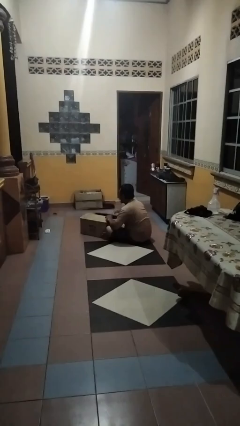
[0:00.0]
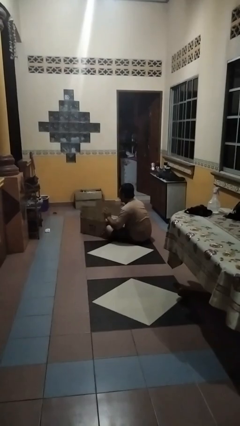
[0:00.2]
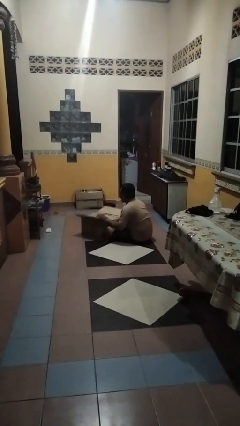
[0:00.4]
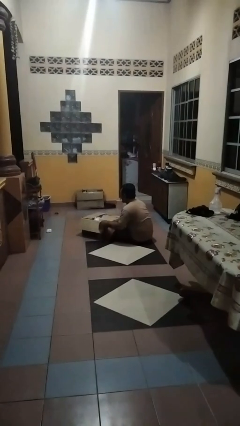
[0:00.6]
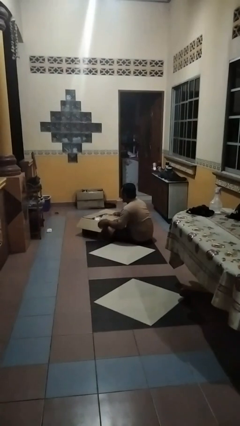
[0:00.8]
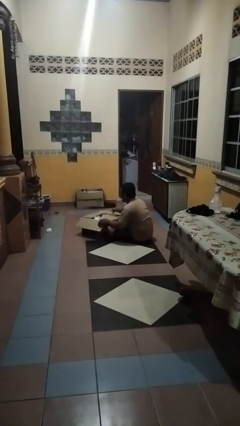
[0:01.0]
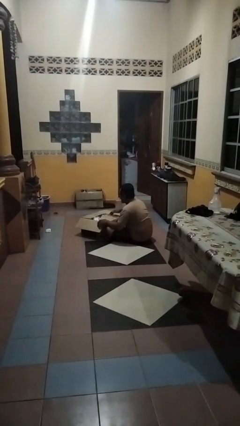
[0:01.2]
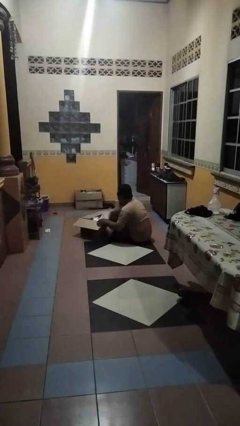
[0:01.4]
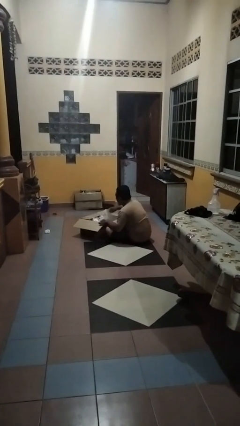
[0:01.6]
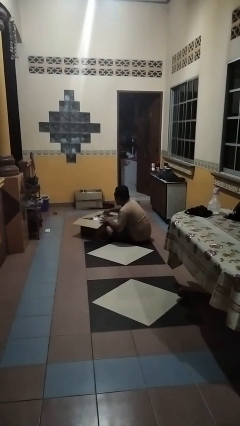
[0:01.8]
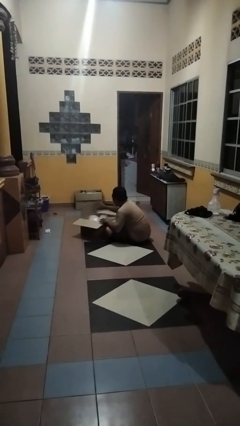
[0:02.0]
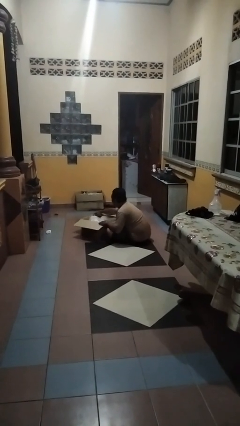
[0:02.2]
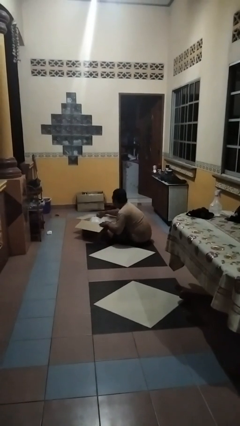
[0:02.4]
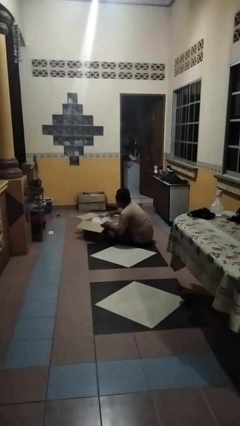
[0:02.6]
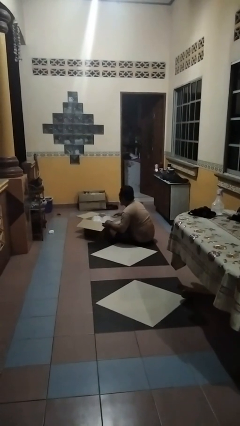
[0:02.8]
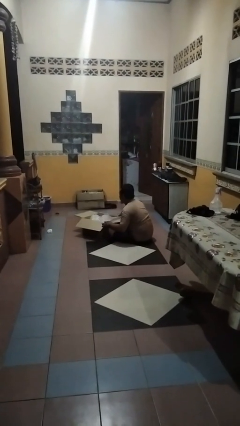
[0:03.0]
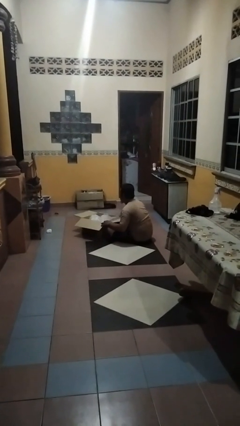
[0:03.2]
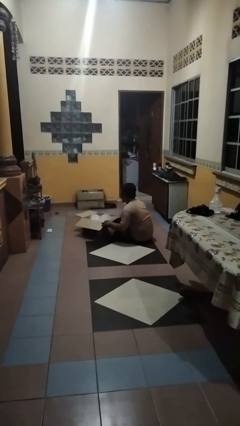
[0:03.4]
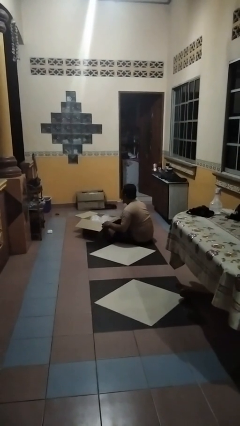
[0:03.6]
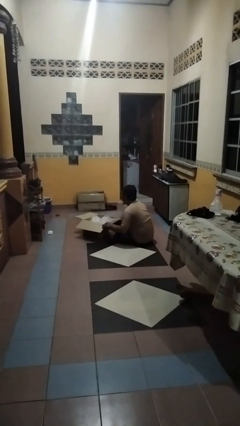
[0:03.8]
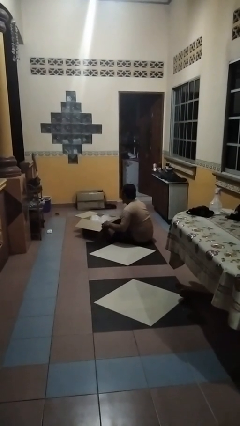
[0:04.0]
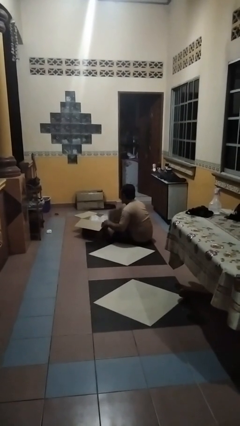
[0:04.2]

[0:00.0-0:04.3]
person opens box

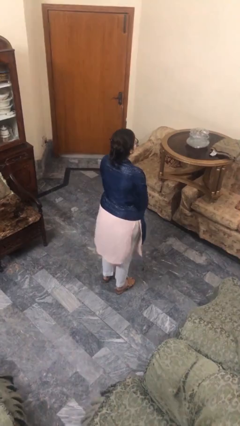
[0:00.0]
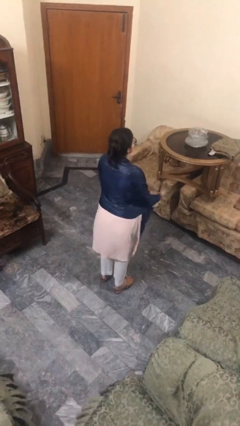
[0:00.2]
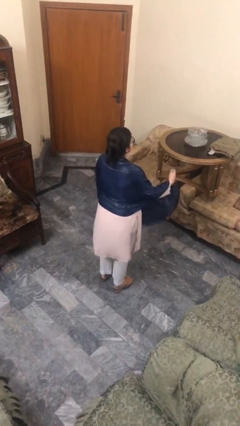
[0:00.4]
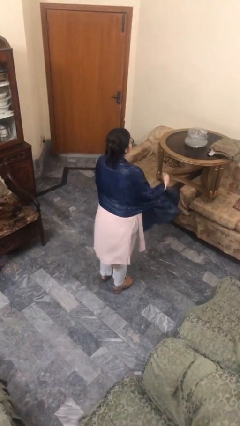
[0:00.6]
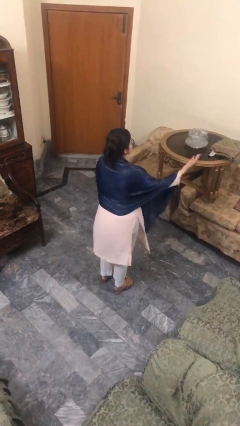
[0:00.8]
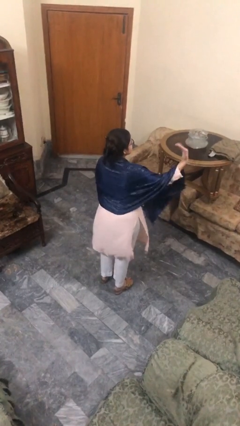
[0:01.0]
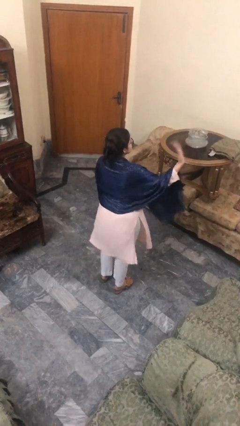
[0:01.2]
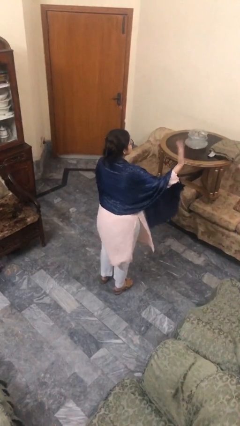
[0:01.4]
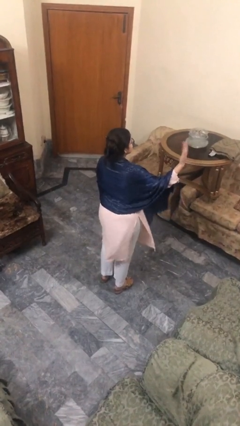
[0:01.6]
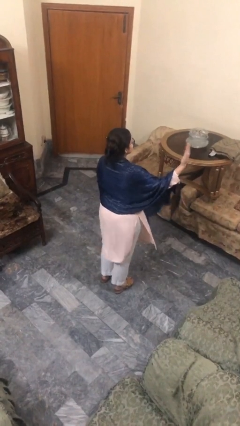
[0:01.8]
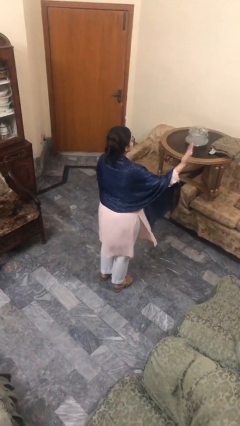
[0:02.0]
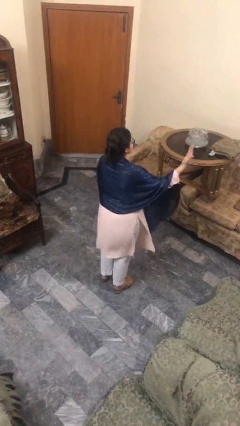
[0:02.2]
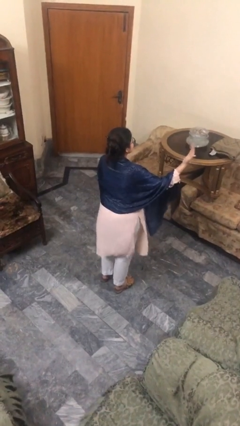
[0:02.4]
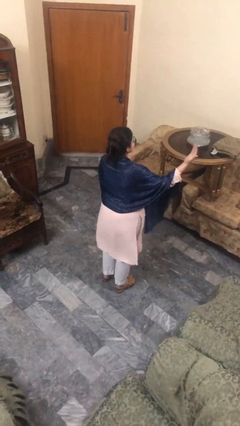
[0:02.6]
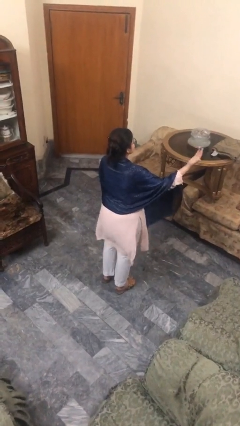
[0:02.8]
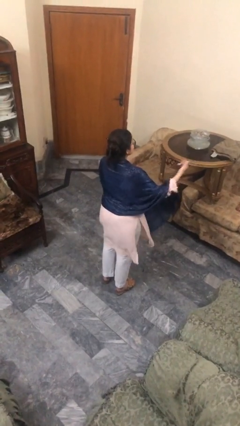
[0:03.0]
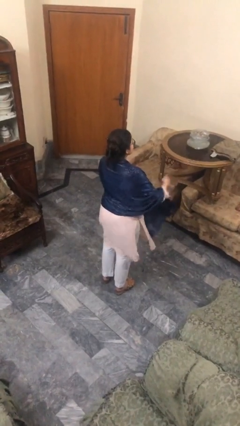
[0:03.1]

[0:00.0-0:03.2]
person gestures come here

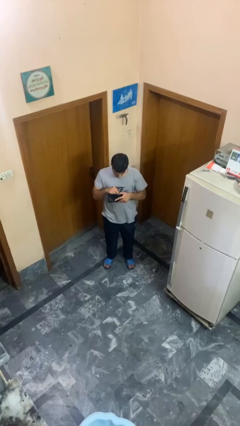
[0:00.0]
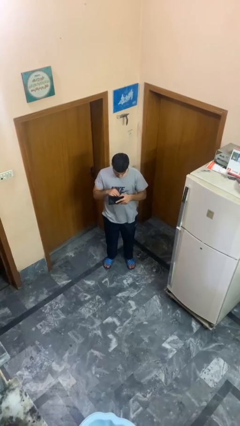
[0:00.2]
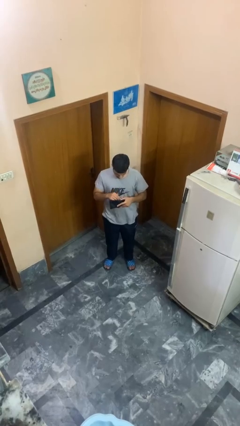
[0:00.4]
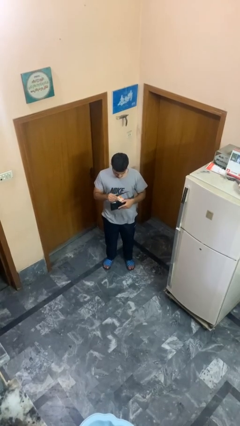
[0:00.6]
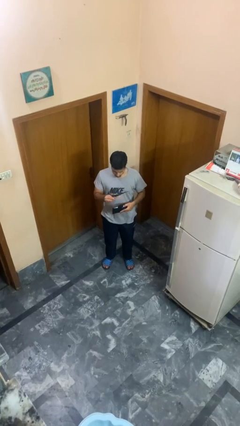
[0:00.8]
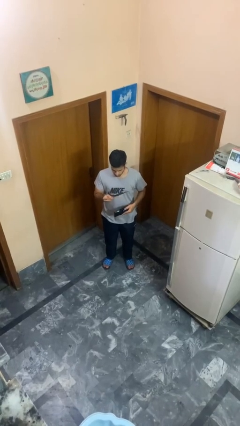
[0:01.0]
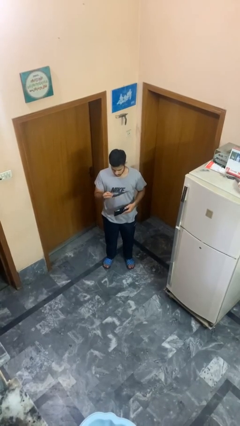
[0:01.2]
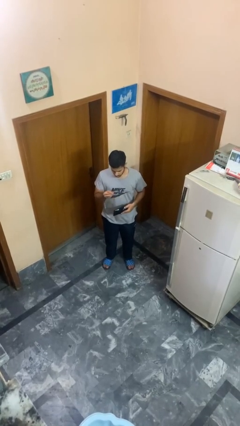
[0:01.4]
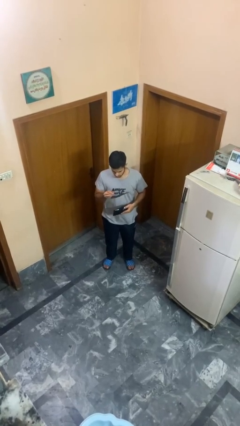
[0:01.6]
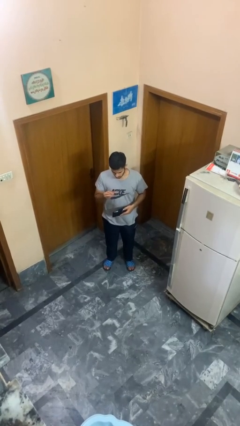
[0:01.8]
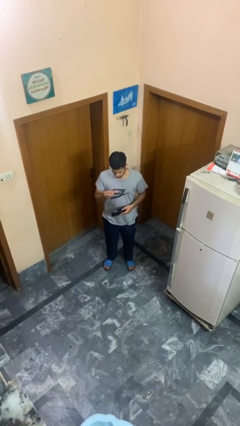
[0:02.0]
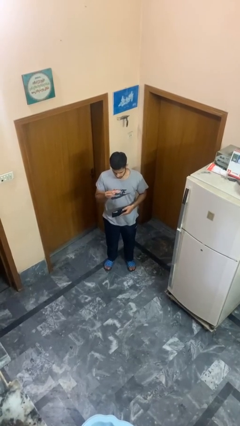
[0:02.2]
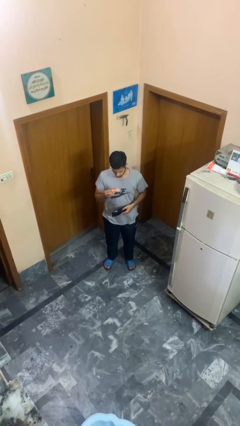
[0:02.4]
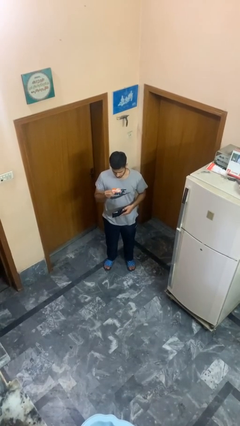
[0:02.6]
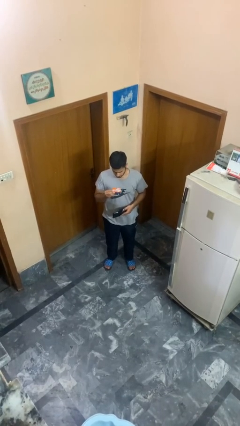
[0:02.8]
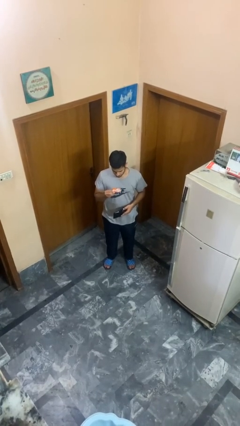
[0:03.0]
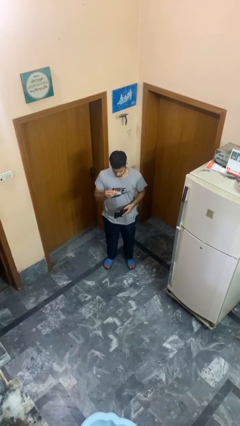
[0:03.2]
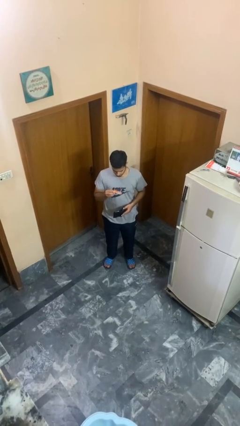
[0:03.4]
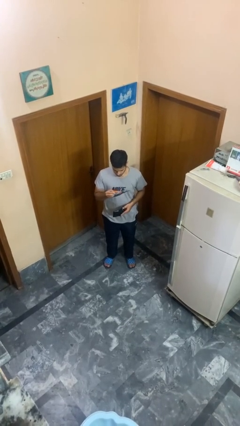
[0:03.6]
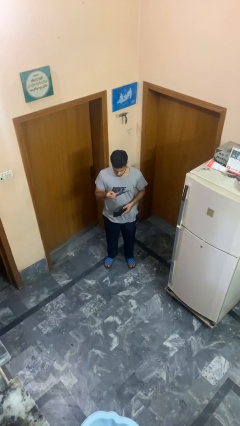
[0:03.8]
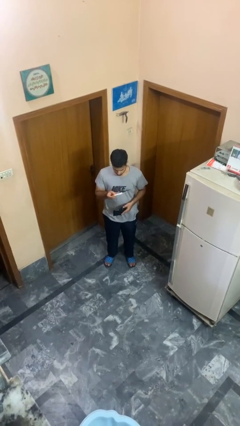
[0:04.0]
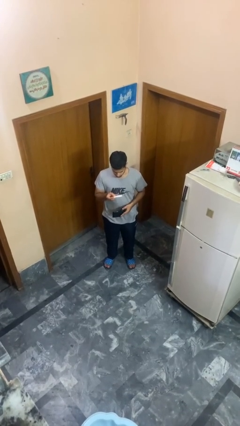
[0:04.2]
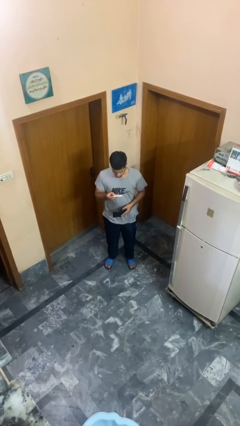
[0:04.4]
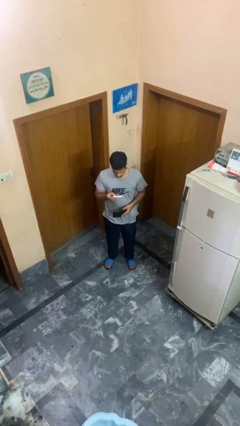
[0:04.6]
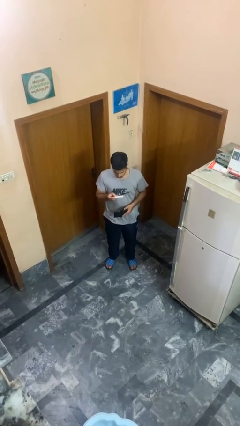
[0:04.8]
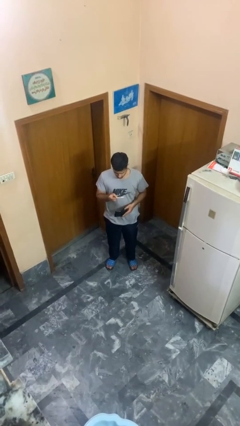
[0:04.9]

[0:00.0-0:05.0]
person takes object from purse

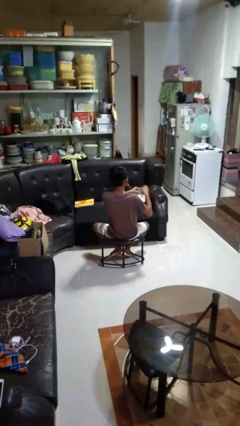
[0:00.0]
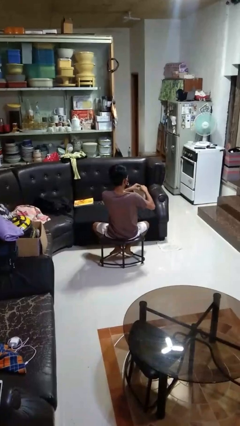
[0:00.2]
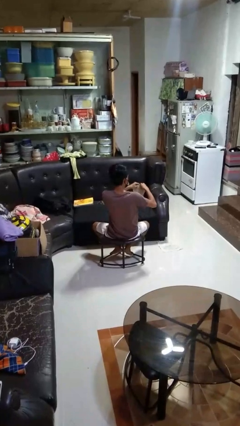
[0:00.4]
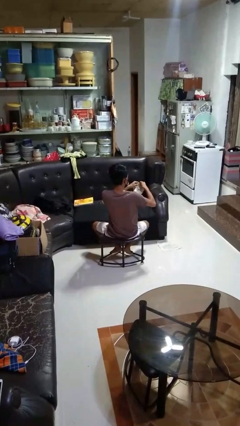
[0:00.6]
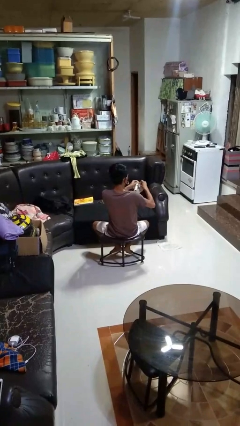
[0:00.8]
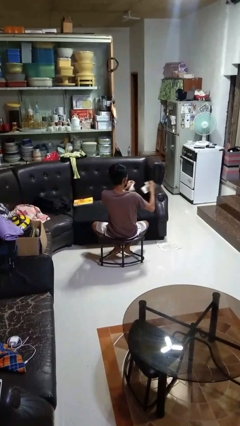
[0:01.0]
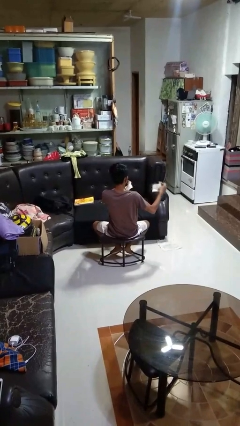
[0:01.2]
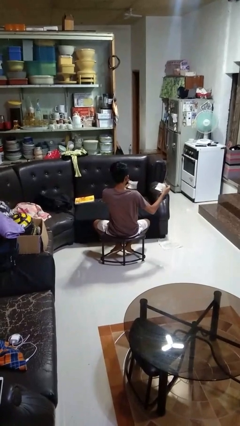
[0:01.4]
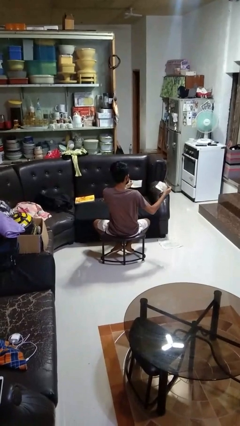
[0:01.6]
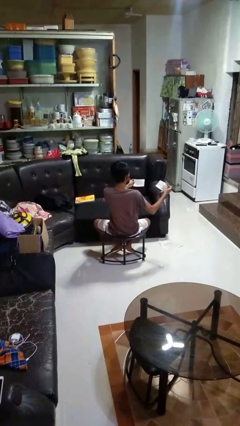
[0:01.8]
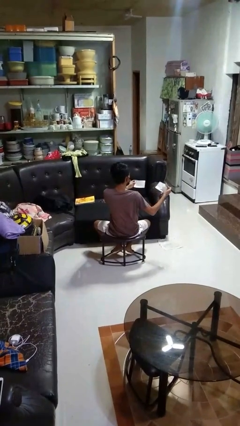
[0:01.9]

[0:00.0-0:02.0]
person tears paper

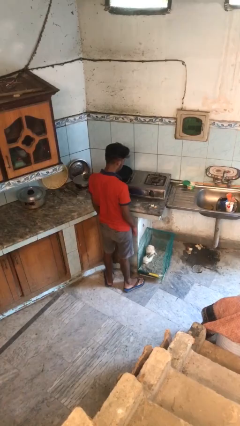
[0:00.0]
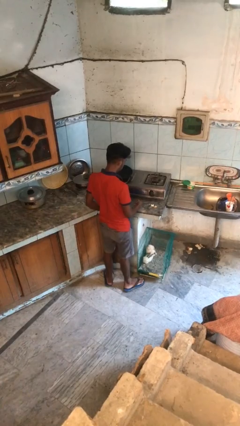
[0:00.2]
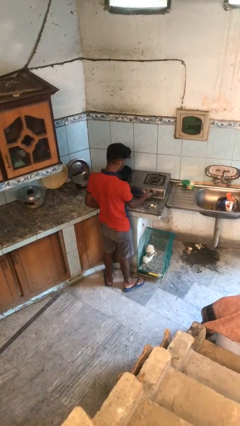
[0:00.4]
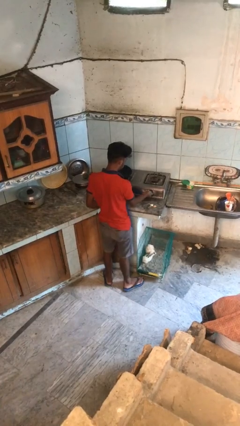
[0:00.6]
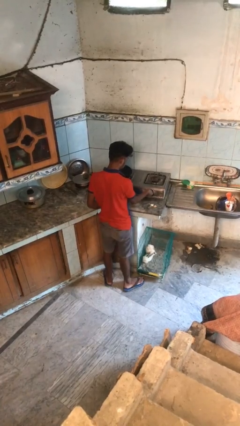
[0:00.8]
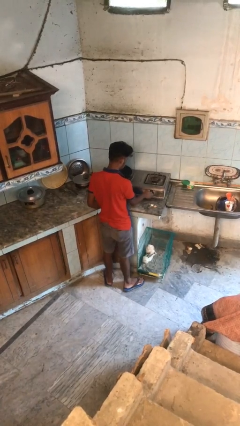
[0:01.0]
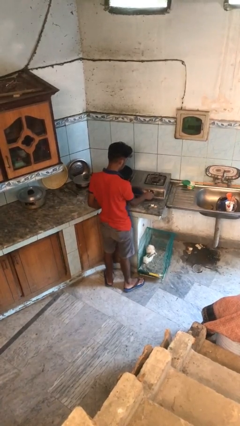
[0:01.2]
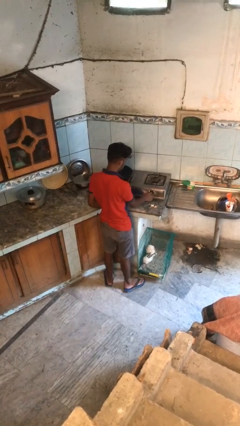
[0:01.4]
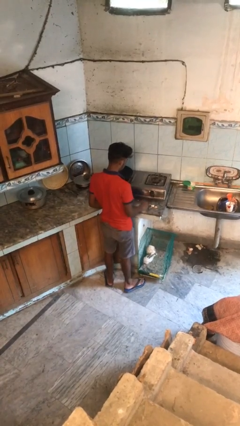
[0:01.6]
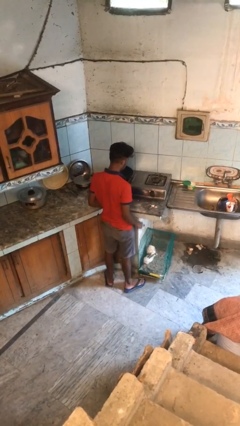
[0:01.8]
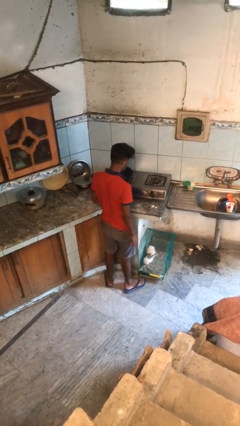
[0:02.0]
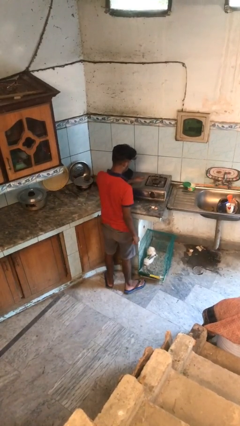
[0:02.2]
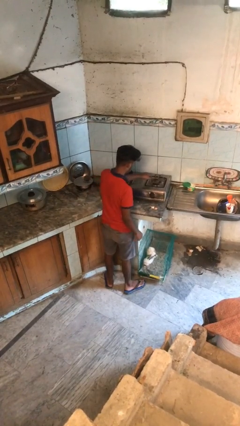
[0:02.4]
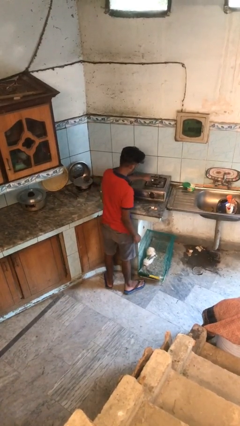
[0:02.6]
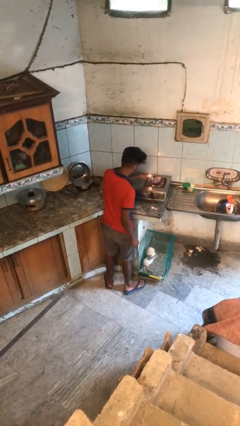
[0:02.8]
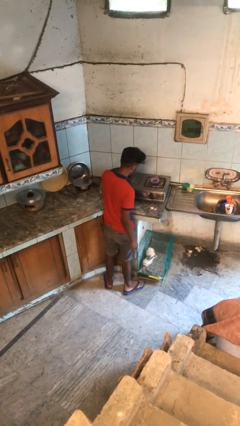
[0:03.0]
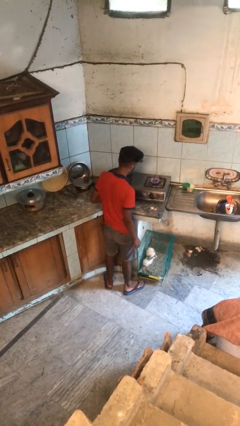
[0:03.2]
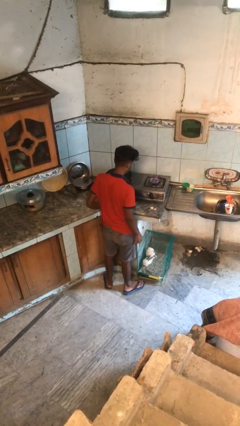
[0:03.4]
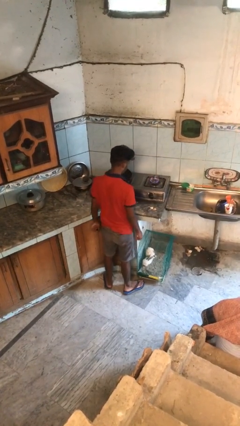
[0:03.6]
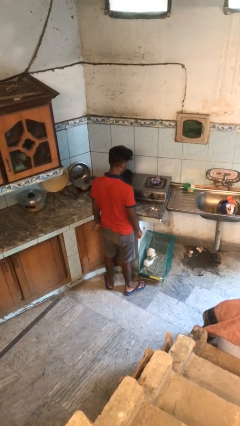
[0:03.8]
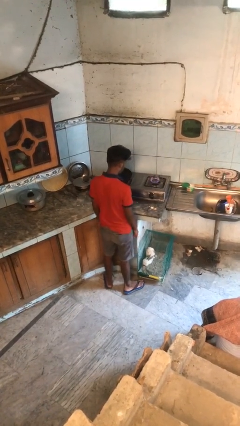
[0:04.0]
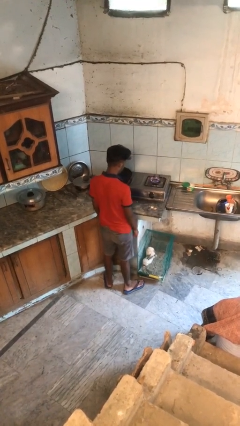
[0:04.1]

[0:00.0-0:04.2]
person turns on stovetop
